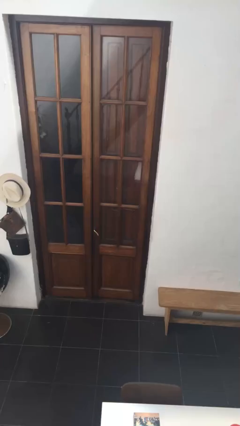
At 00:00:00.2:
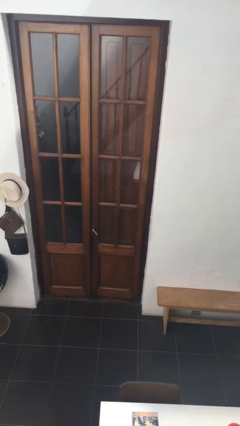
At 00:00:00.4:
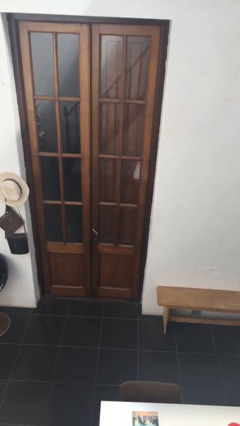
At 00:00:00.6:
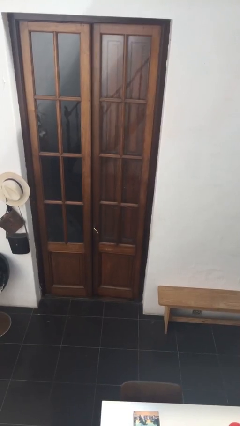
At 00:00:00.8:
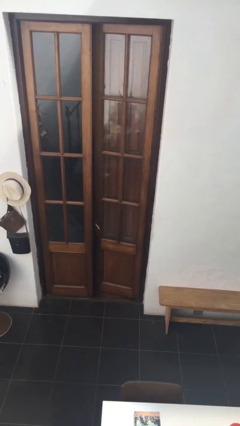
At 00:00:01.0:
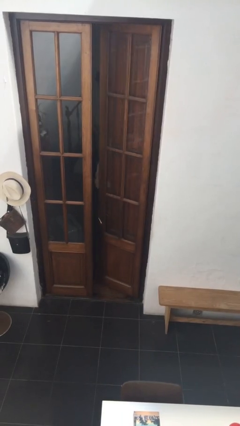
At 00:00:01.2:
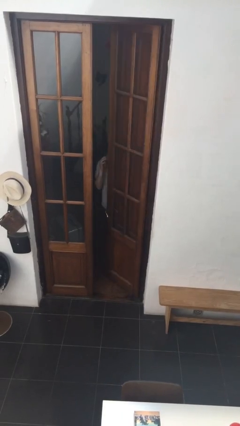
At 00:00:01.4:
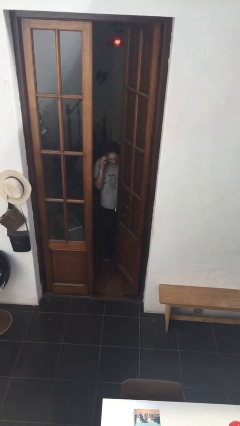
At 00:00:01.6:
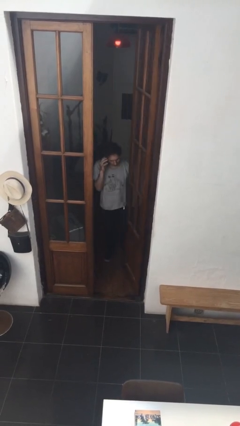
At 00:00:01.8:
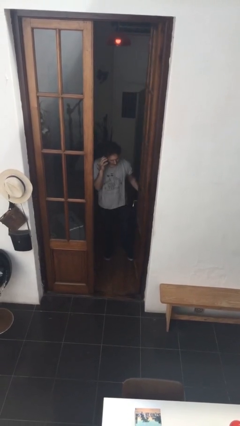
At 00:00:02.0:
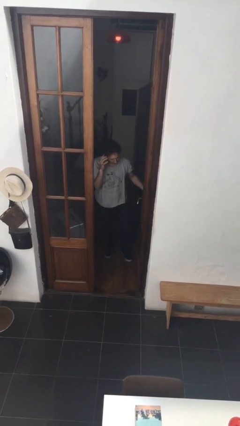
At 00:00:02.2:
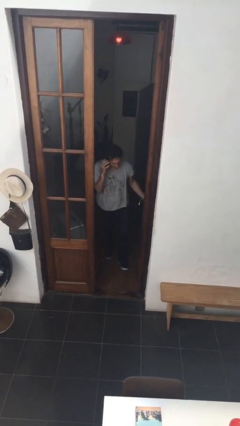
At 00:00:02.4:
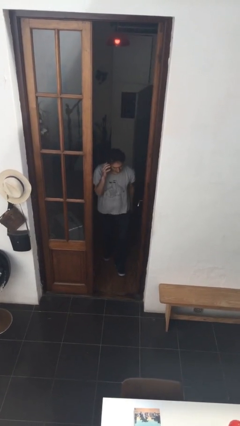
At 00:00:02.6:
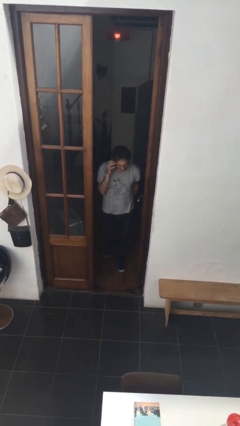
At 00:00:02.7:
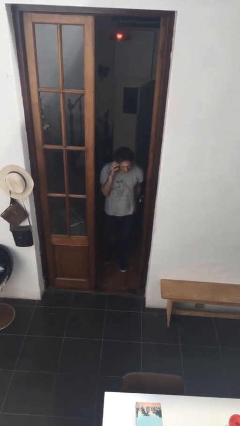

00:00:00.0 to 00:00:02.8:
person opens facility door

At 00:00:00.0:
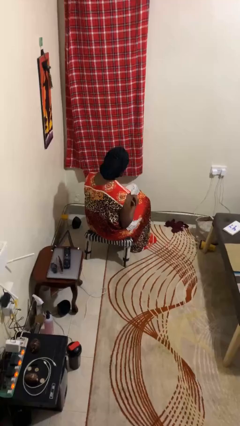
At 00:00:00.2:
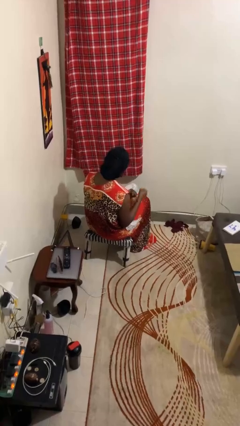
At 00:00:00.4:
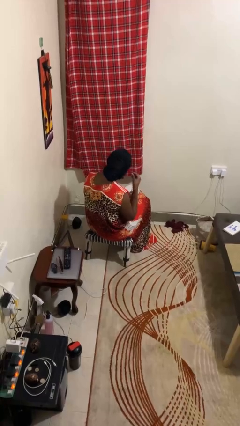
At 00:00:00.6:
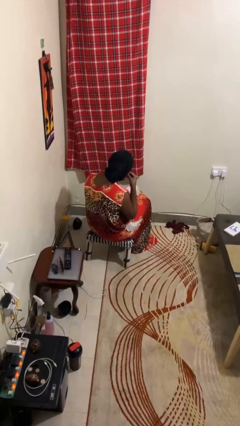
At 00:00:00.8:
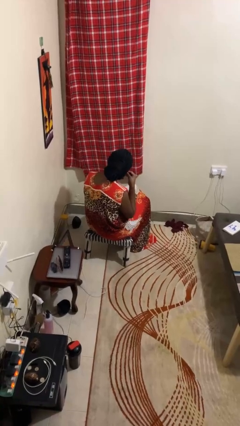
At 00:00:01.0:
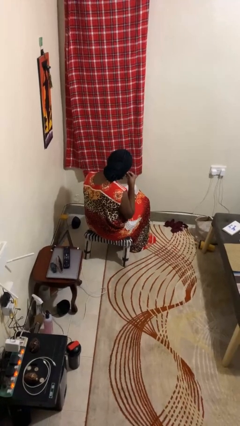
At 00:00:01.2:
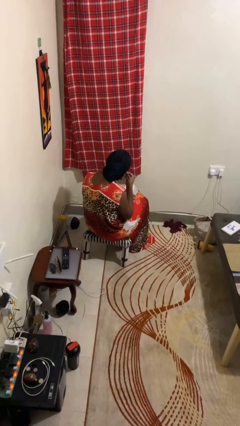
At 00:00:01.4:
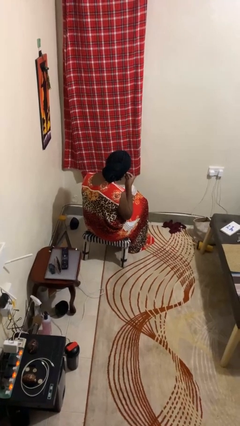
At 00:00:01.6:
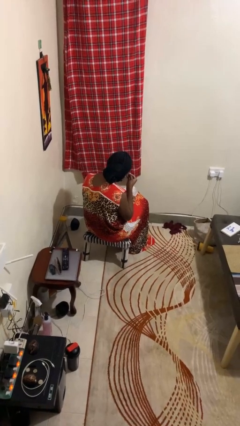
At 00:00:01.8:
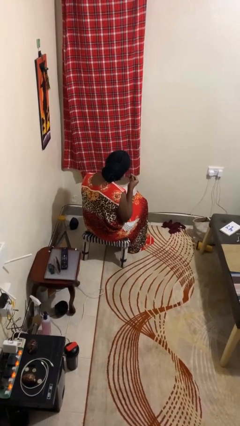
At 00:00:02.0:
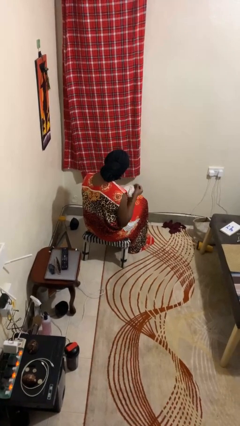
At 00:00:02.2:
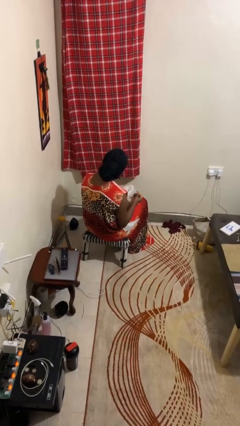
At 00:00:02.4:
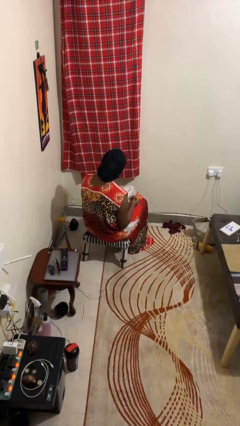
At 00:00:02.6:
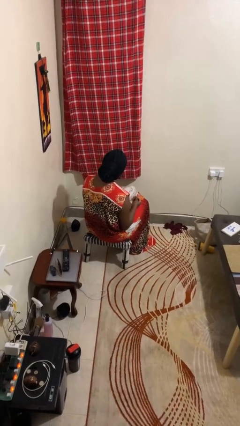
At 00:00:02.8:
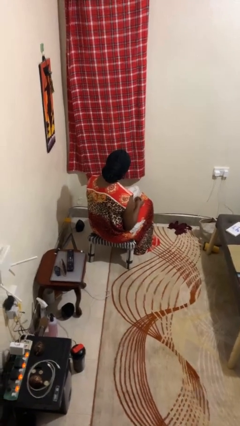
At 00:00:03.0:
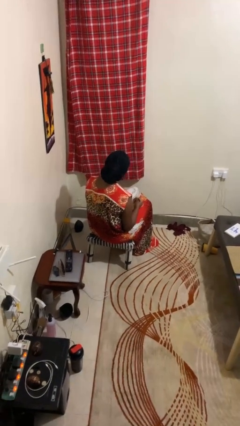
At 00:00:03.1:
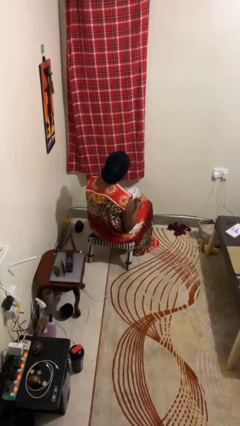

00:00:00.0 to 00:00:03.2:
person takes off earrings

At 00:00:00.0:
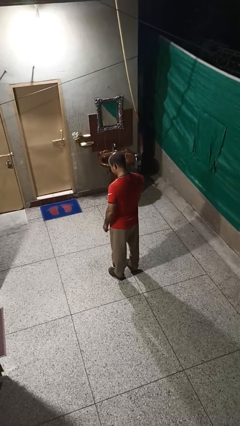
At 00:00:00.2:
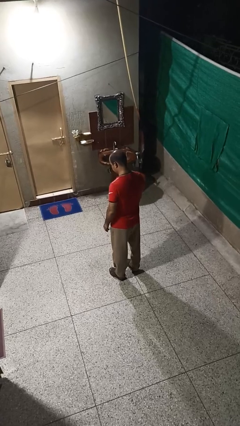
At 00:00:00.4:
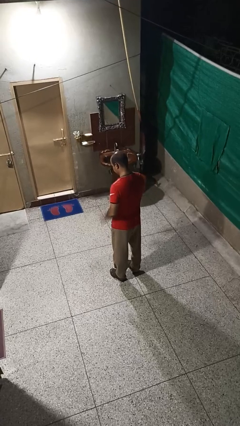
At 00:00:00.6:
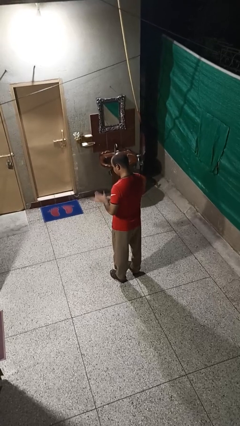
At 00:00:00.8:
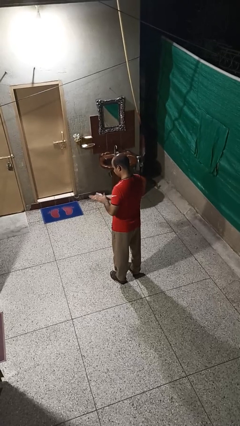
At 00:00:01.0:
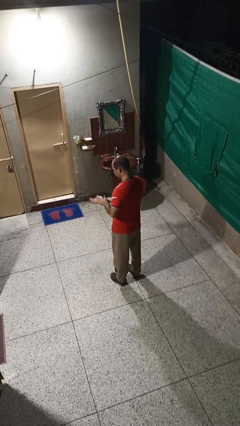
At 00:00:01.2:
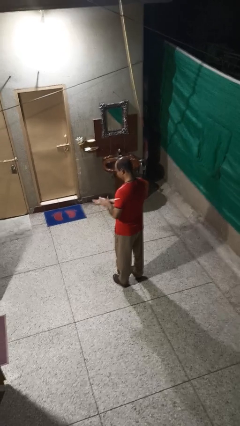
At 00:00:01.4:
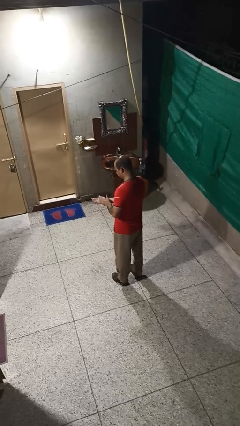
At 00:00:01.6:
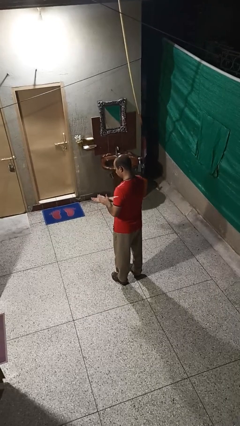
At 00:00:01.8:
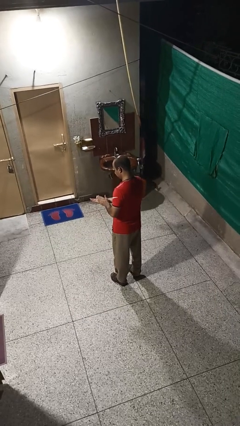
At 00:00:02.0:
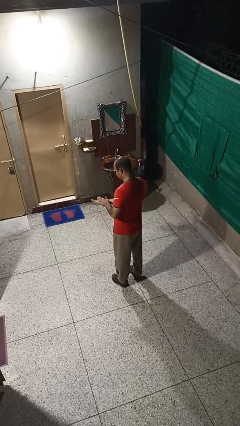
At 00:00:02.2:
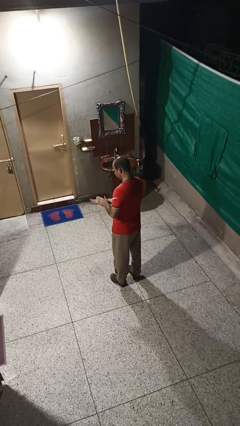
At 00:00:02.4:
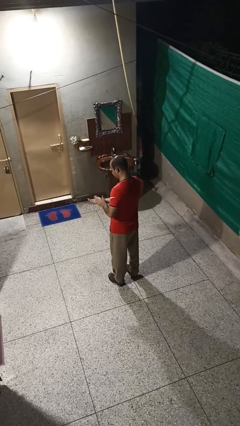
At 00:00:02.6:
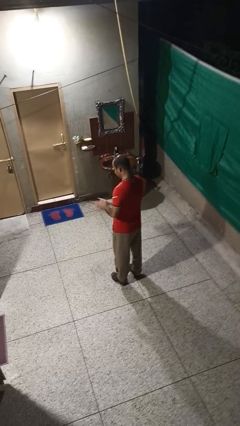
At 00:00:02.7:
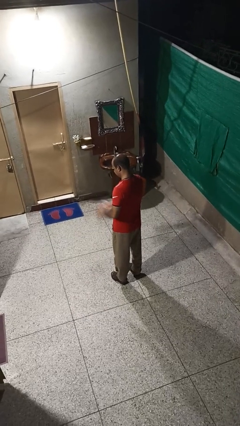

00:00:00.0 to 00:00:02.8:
person claps hands

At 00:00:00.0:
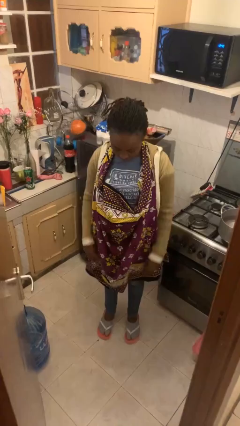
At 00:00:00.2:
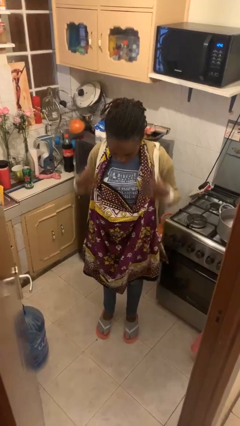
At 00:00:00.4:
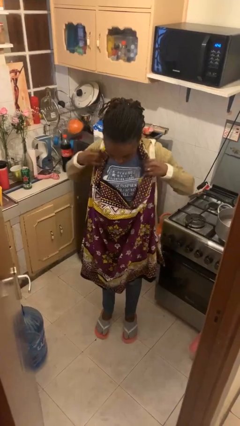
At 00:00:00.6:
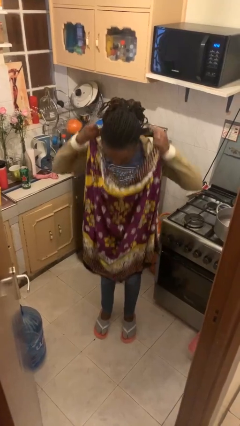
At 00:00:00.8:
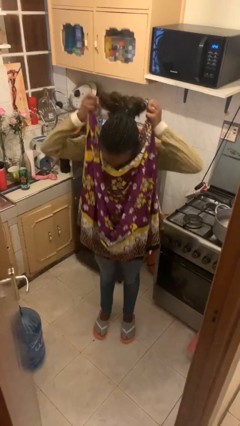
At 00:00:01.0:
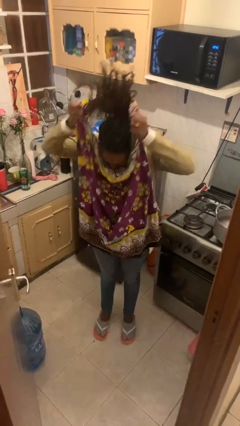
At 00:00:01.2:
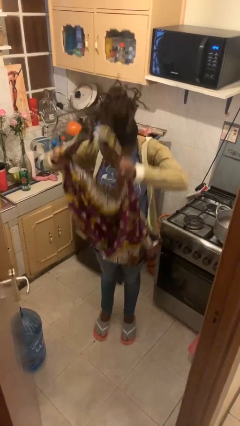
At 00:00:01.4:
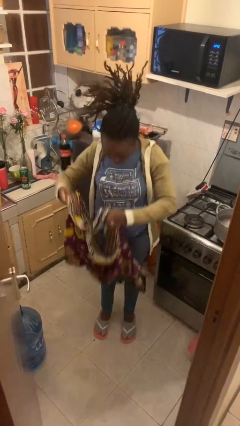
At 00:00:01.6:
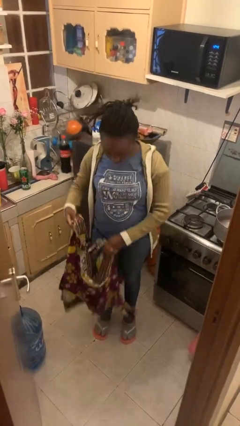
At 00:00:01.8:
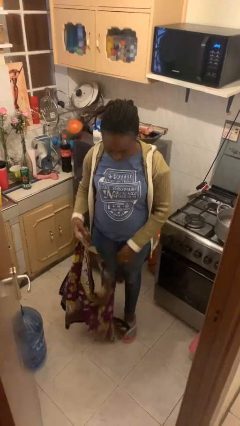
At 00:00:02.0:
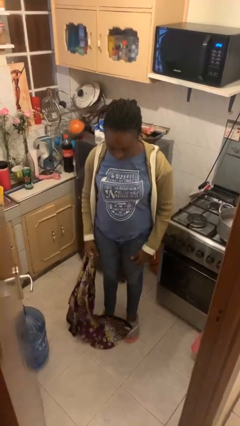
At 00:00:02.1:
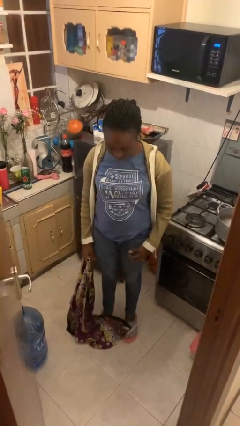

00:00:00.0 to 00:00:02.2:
person takes off apron

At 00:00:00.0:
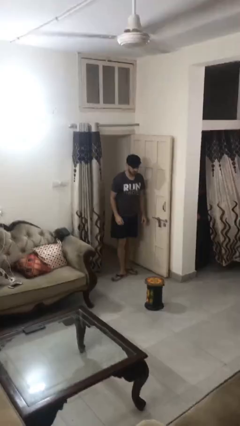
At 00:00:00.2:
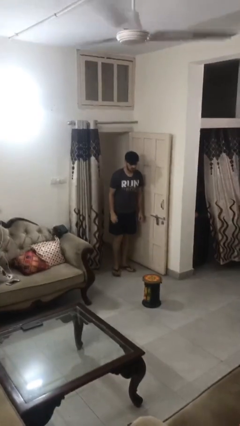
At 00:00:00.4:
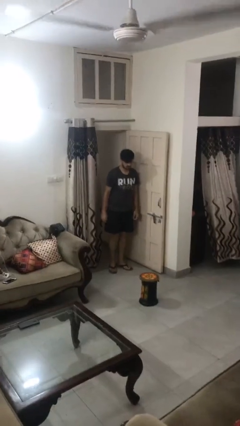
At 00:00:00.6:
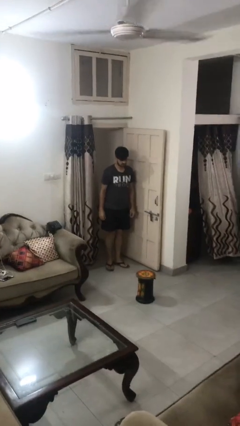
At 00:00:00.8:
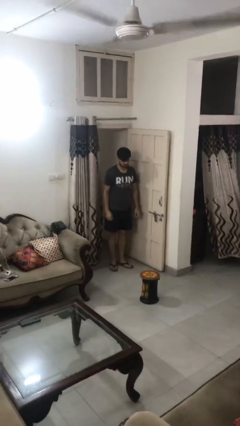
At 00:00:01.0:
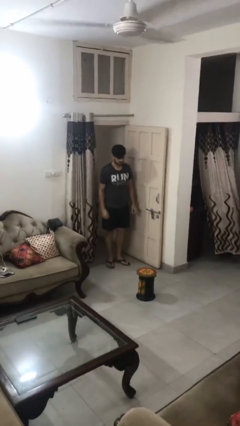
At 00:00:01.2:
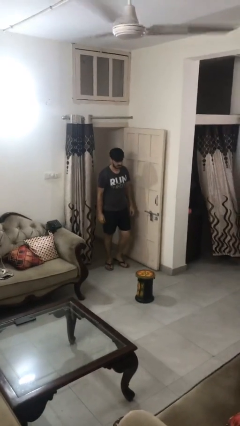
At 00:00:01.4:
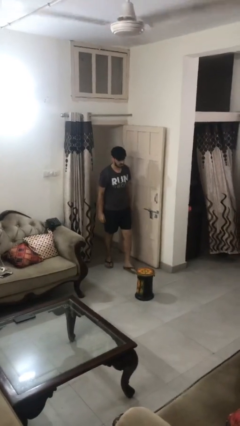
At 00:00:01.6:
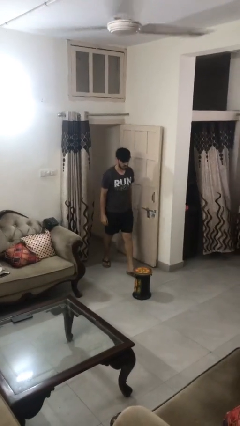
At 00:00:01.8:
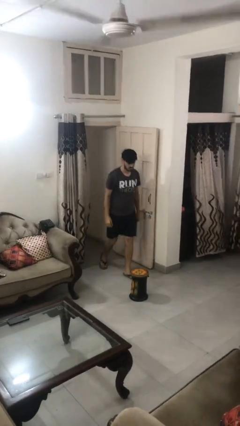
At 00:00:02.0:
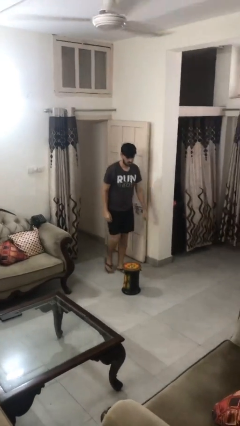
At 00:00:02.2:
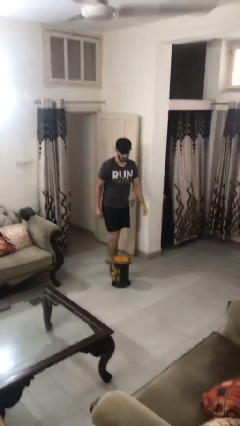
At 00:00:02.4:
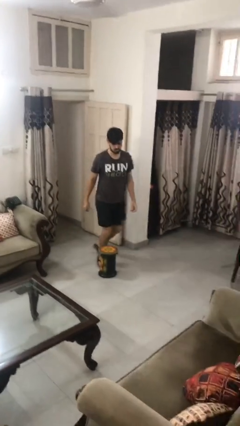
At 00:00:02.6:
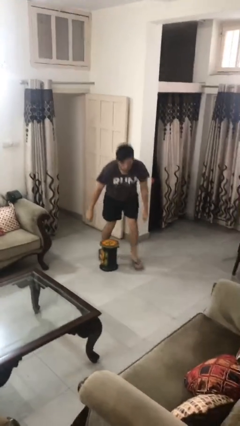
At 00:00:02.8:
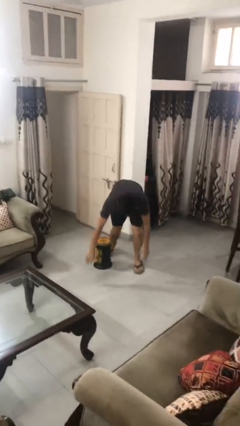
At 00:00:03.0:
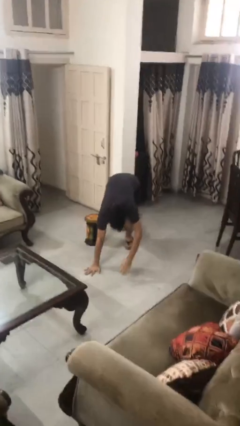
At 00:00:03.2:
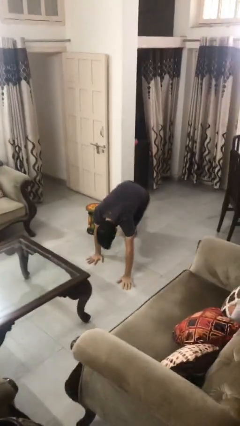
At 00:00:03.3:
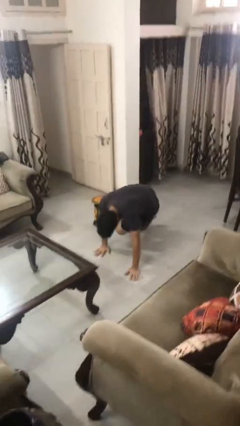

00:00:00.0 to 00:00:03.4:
person trips on object on floor

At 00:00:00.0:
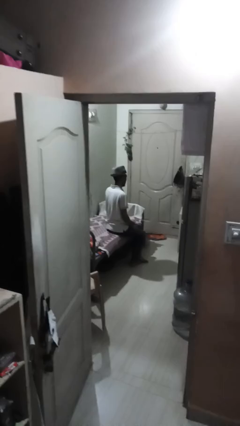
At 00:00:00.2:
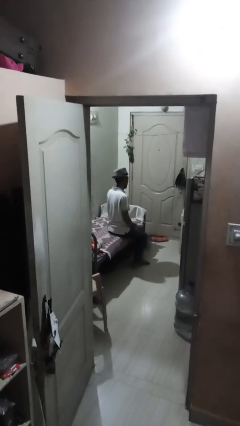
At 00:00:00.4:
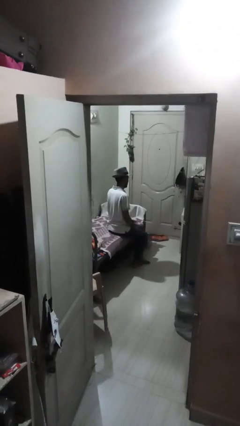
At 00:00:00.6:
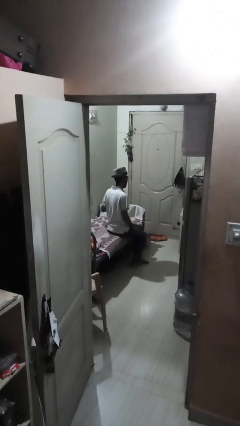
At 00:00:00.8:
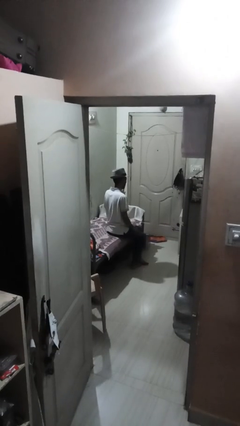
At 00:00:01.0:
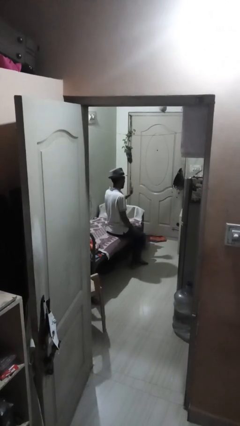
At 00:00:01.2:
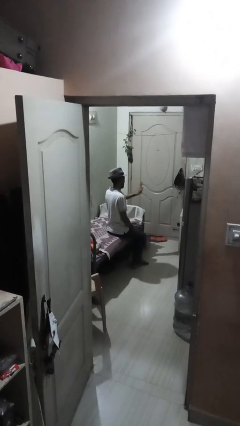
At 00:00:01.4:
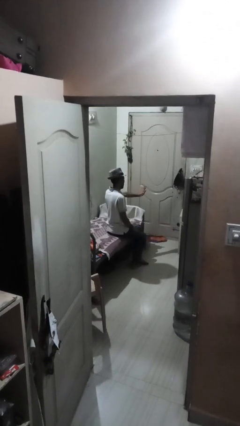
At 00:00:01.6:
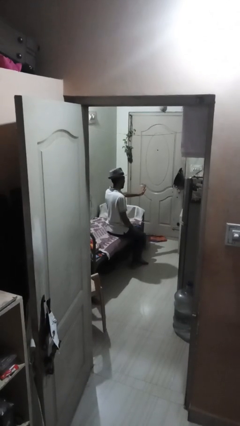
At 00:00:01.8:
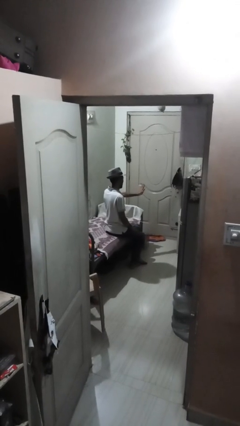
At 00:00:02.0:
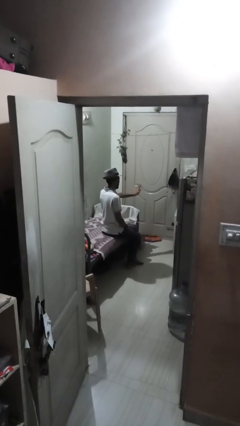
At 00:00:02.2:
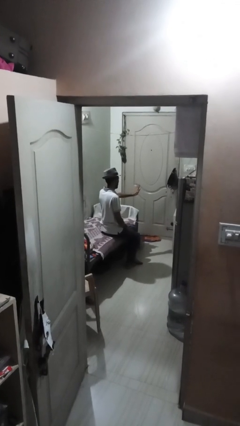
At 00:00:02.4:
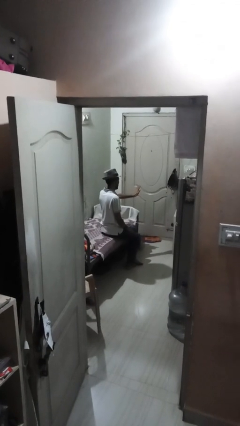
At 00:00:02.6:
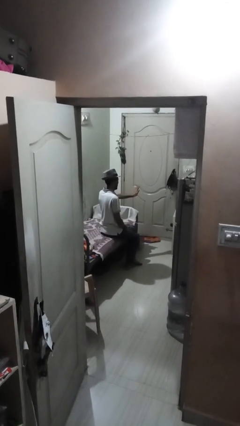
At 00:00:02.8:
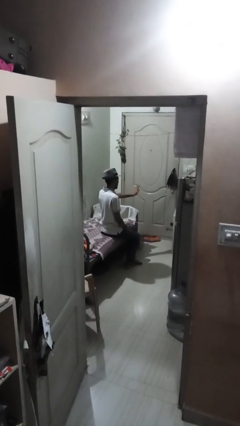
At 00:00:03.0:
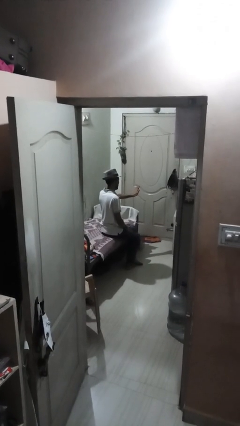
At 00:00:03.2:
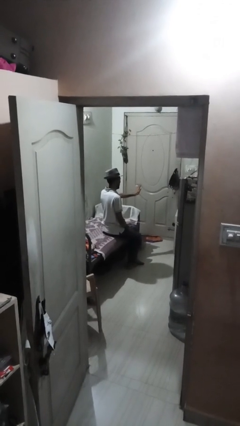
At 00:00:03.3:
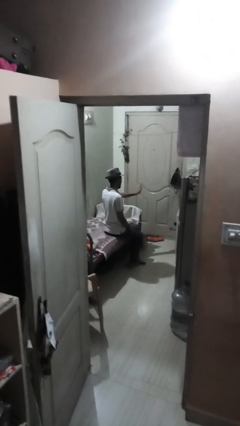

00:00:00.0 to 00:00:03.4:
person gestures stop
